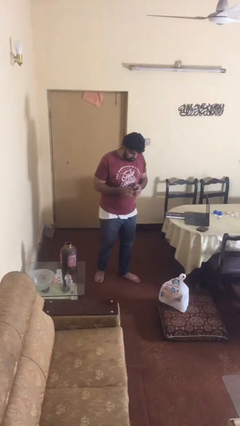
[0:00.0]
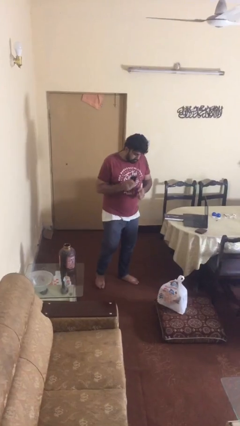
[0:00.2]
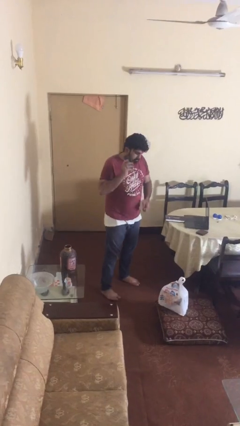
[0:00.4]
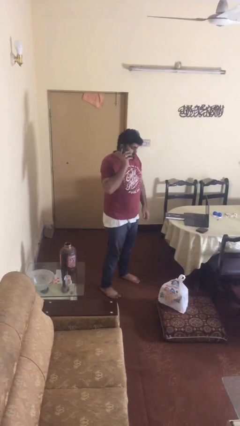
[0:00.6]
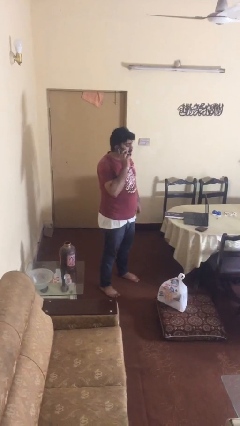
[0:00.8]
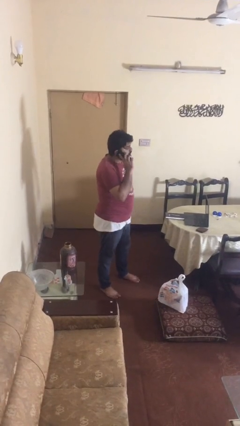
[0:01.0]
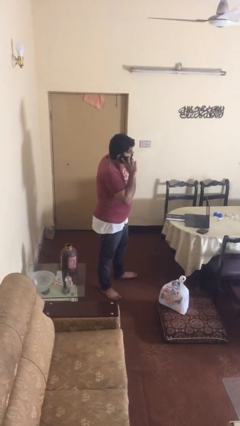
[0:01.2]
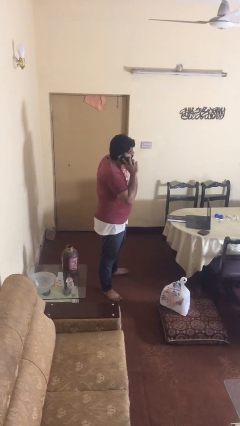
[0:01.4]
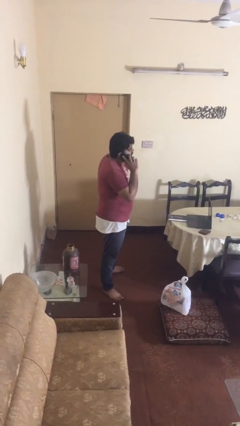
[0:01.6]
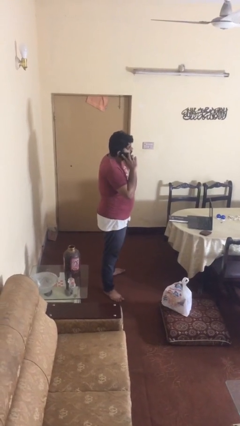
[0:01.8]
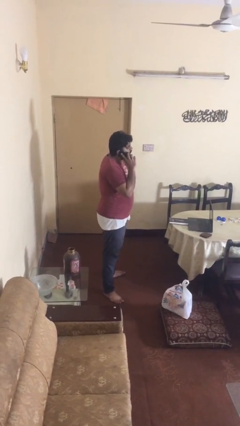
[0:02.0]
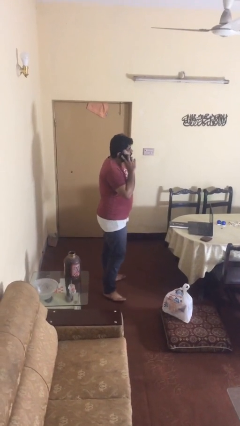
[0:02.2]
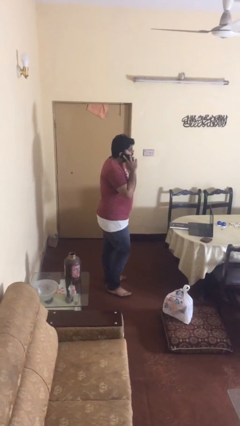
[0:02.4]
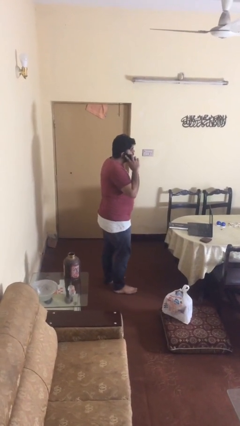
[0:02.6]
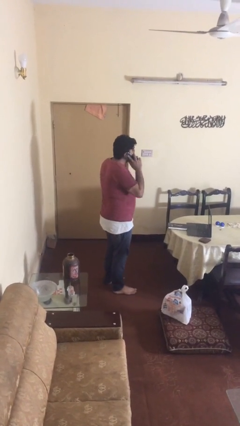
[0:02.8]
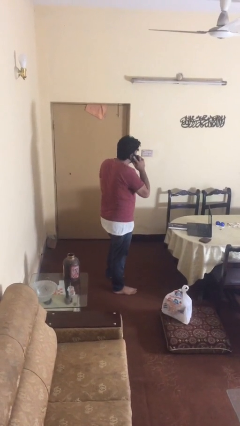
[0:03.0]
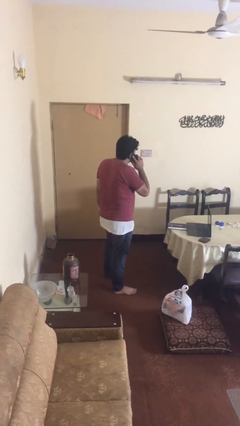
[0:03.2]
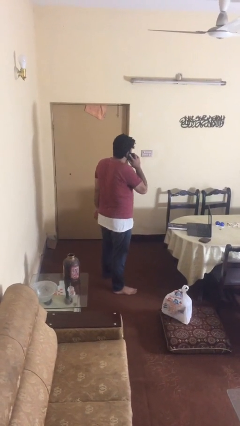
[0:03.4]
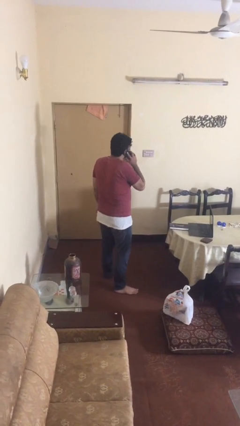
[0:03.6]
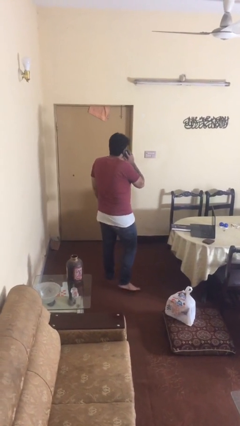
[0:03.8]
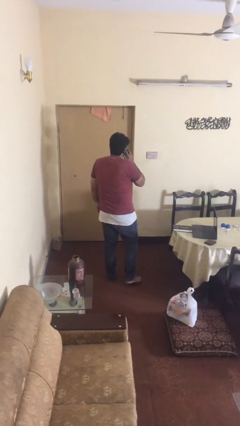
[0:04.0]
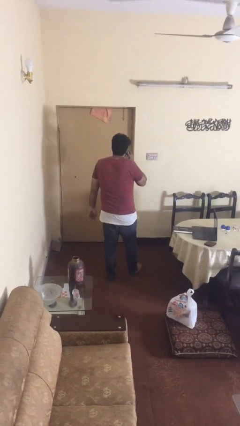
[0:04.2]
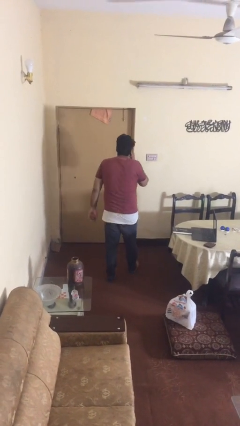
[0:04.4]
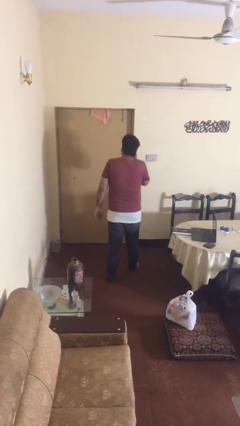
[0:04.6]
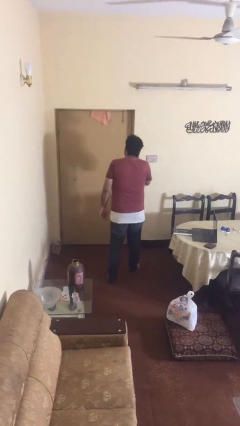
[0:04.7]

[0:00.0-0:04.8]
person talks on phone

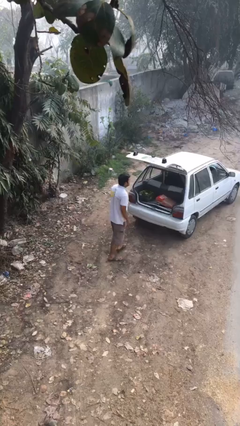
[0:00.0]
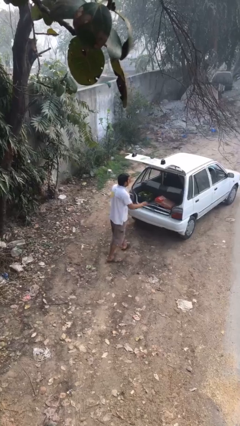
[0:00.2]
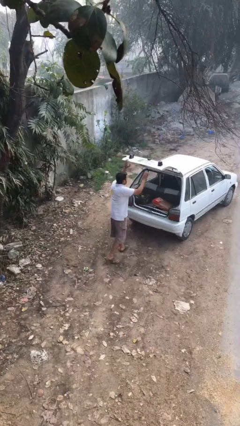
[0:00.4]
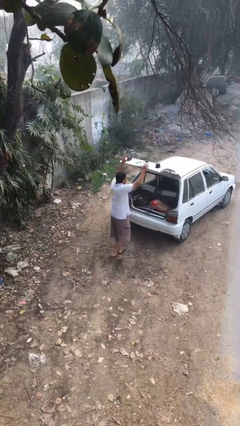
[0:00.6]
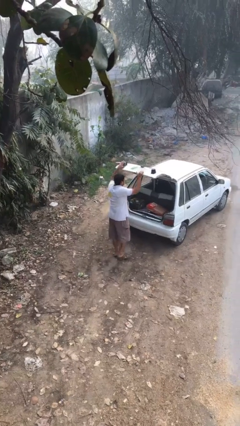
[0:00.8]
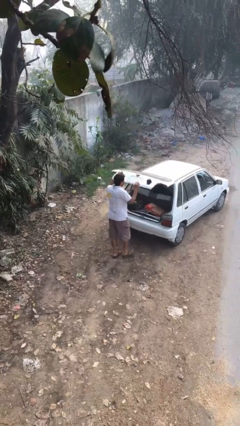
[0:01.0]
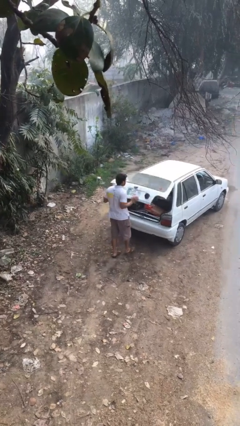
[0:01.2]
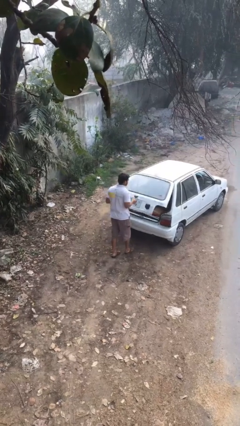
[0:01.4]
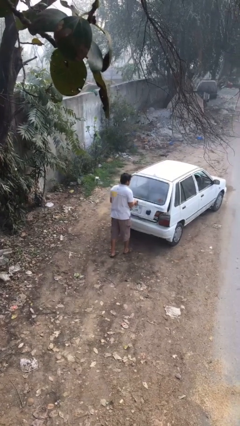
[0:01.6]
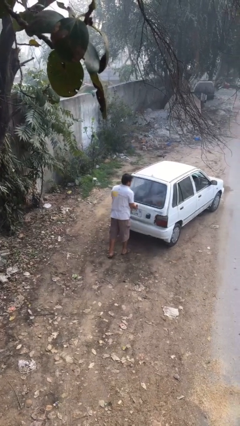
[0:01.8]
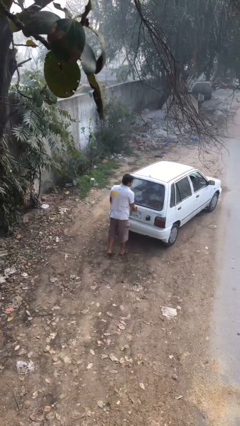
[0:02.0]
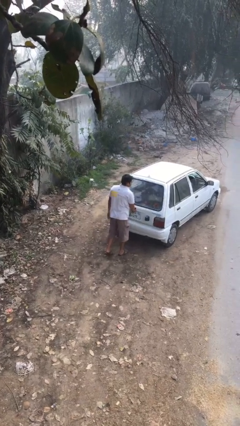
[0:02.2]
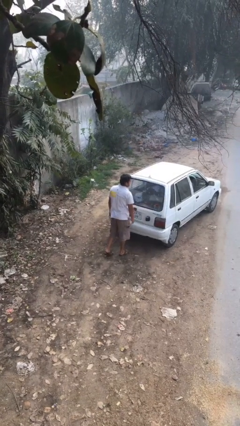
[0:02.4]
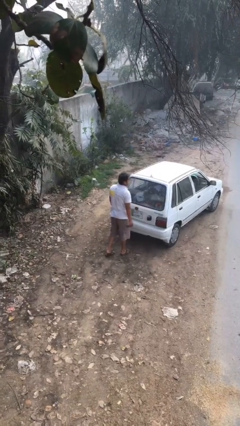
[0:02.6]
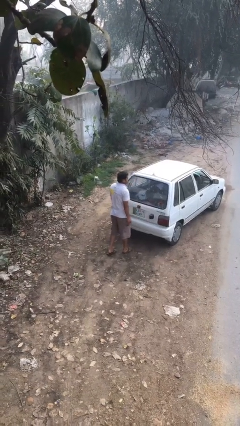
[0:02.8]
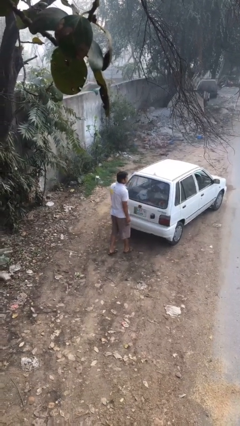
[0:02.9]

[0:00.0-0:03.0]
person closes car trunk

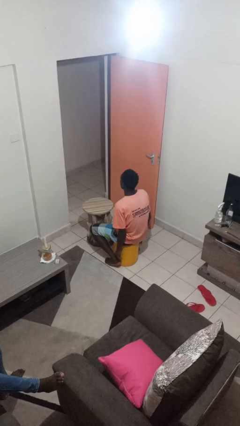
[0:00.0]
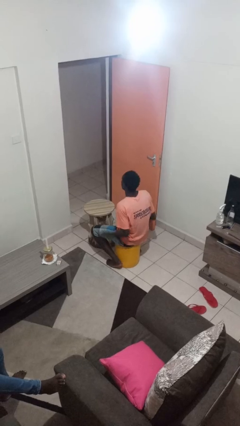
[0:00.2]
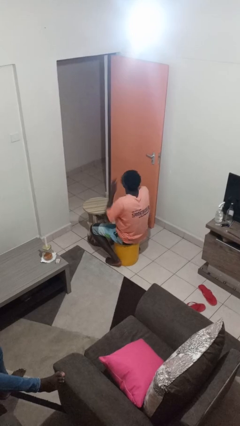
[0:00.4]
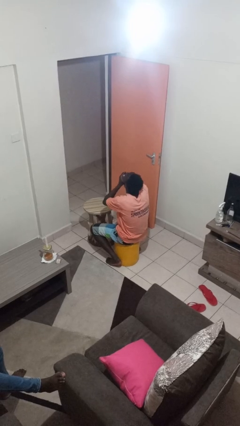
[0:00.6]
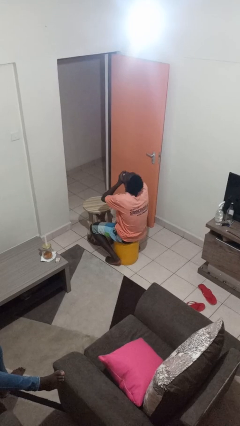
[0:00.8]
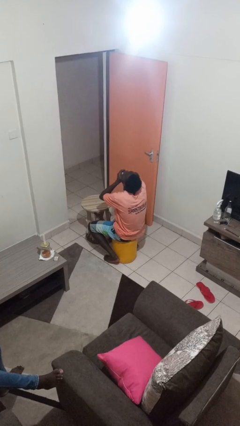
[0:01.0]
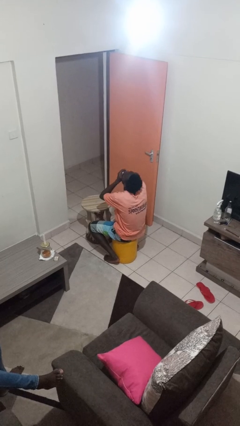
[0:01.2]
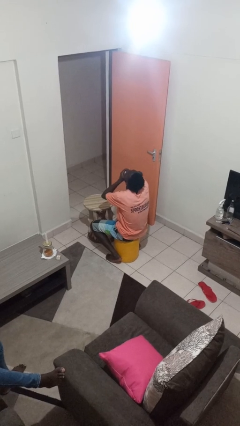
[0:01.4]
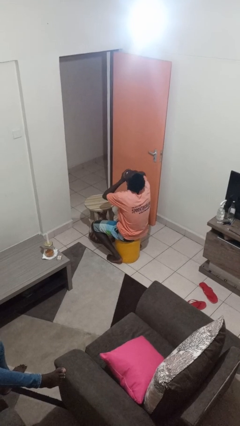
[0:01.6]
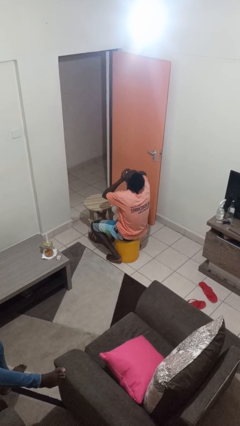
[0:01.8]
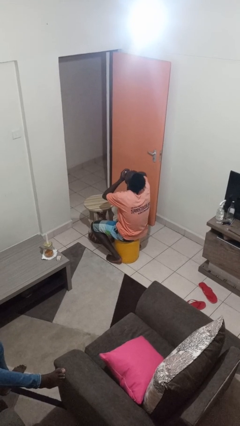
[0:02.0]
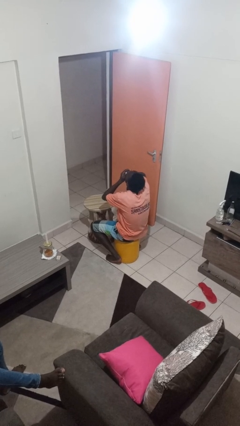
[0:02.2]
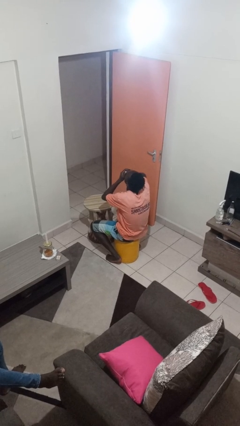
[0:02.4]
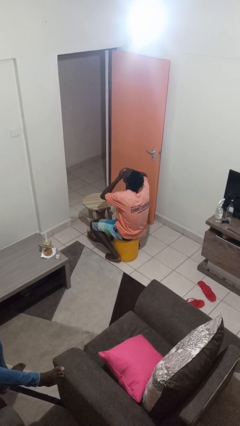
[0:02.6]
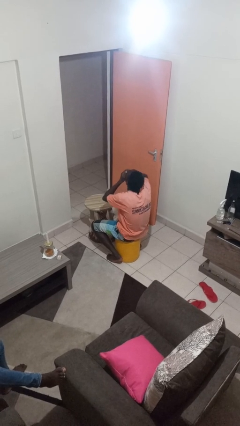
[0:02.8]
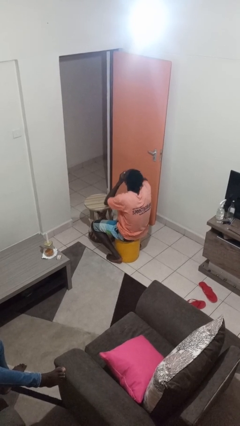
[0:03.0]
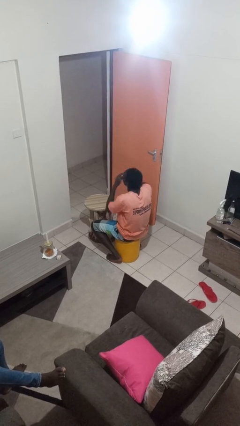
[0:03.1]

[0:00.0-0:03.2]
person yawns

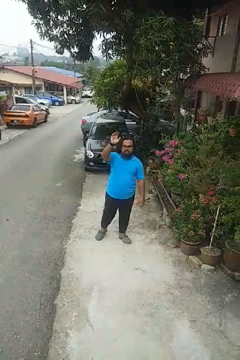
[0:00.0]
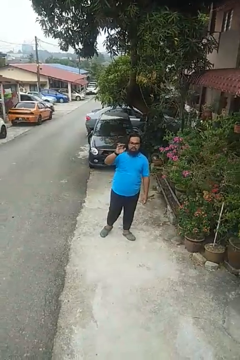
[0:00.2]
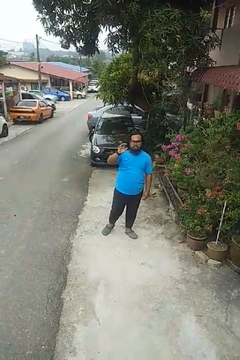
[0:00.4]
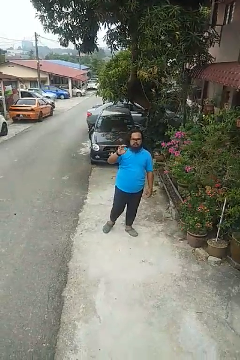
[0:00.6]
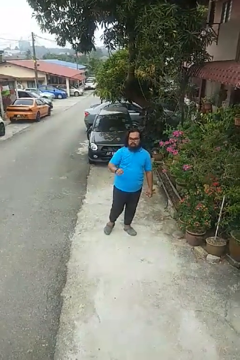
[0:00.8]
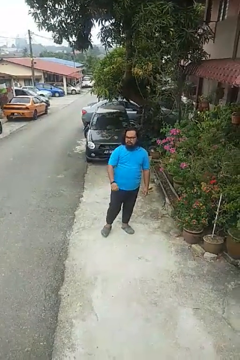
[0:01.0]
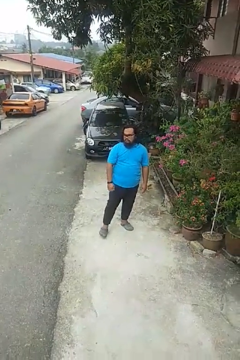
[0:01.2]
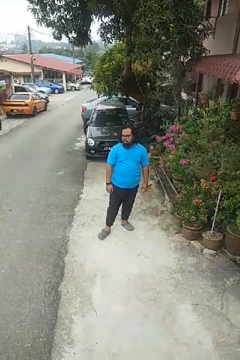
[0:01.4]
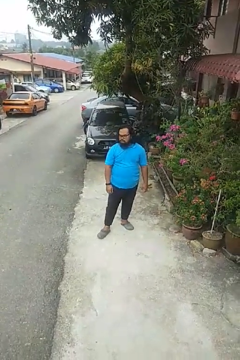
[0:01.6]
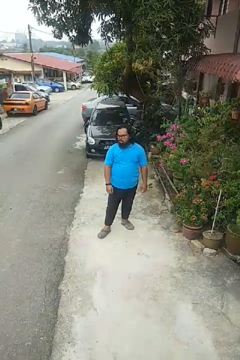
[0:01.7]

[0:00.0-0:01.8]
person gestures lower hand

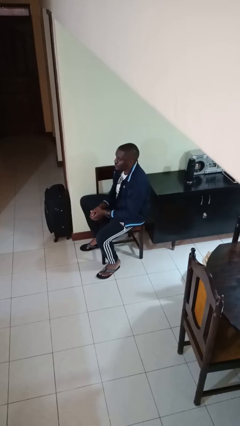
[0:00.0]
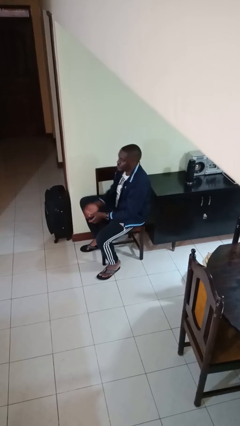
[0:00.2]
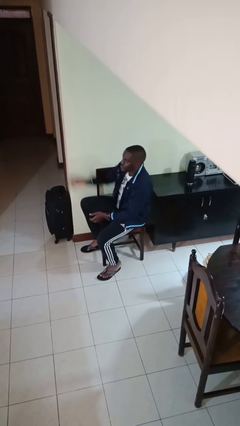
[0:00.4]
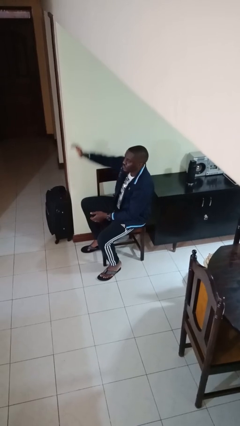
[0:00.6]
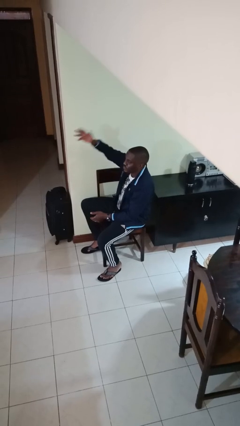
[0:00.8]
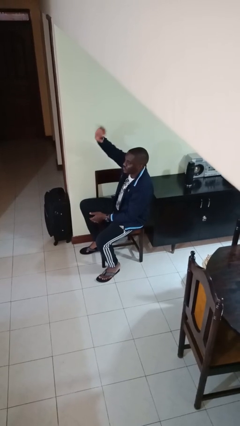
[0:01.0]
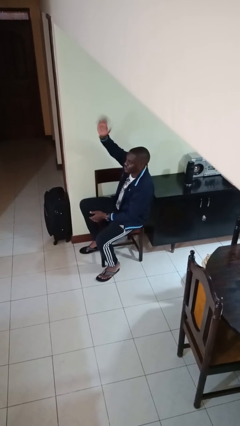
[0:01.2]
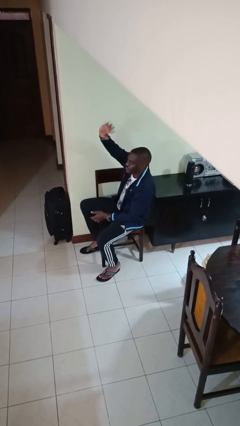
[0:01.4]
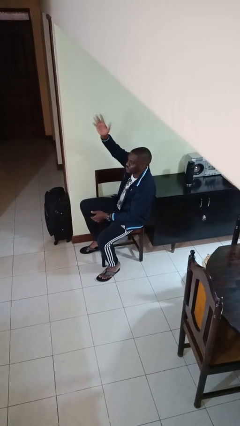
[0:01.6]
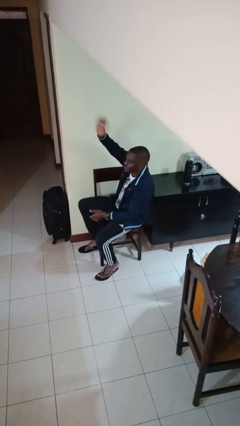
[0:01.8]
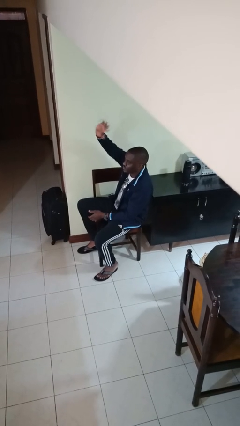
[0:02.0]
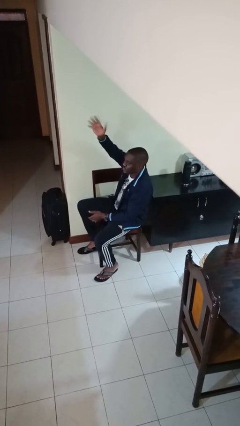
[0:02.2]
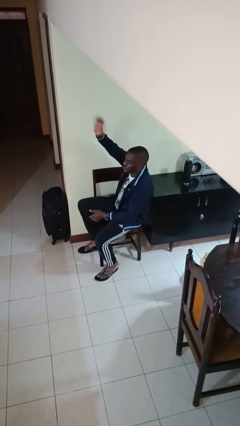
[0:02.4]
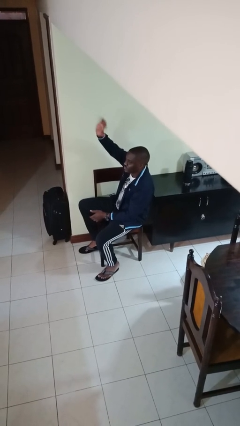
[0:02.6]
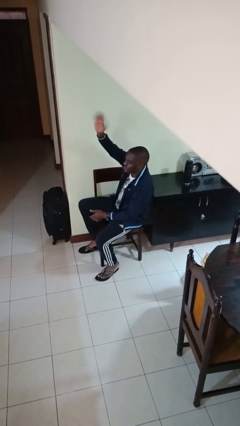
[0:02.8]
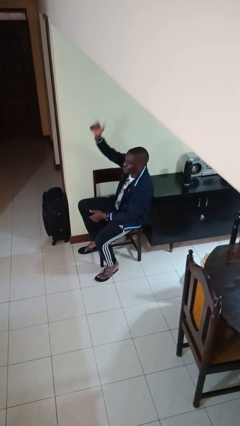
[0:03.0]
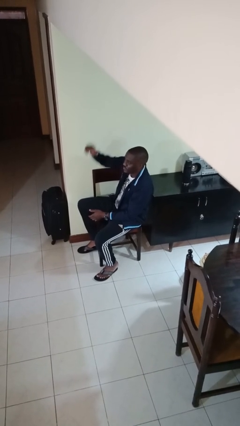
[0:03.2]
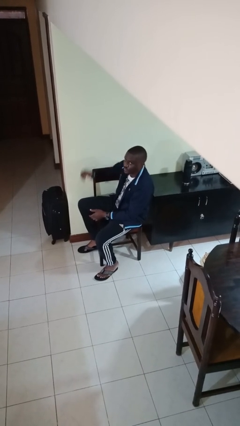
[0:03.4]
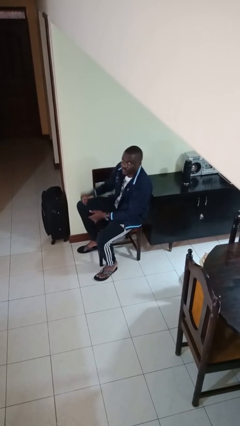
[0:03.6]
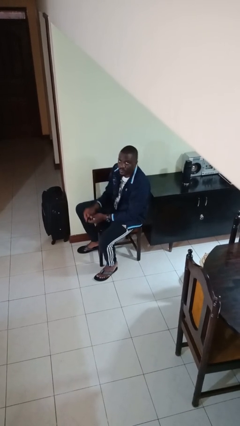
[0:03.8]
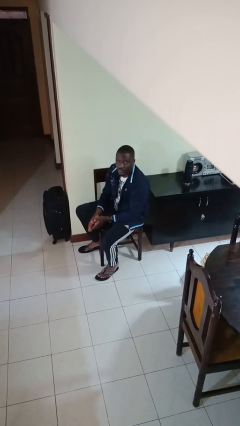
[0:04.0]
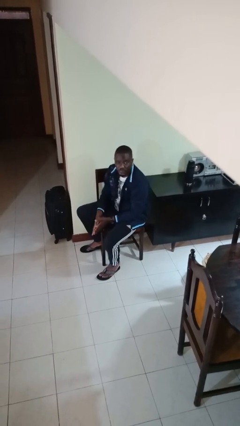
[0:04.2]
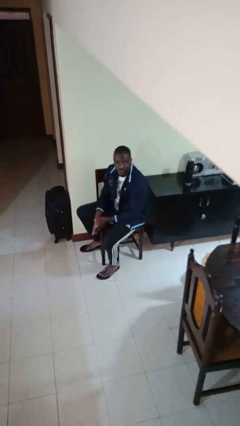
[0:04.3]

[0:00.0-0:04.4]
person waves at person

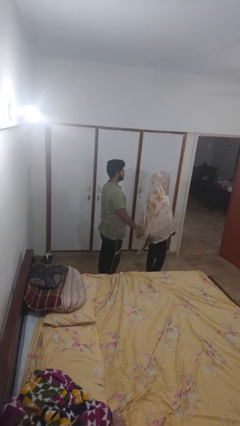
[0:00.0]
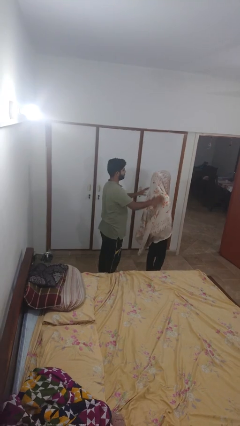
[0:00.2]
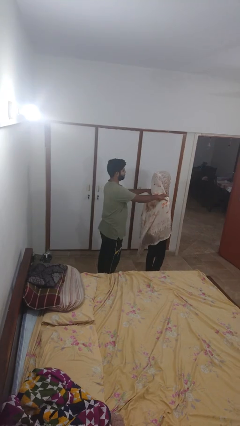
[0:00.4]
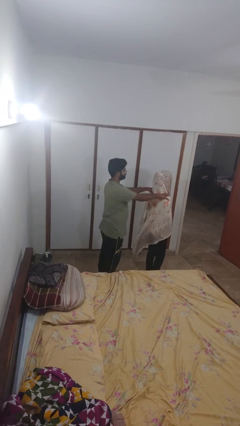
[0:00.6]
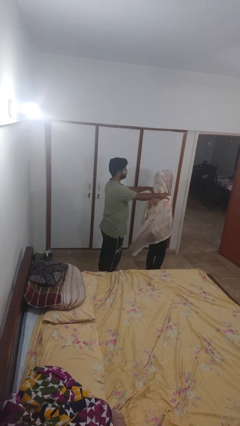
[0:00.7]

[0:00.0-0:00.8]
person grabs person by shoulder
